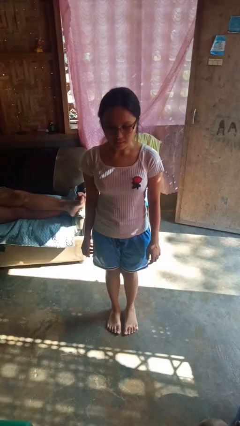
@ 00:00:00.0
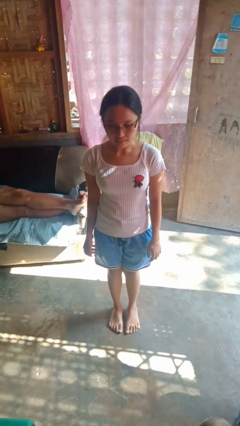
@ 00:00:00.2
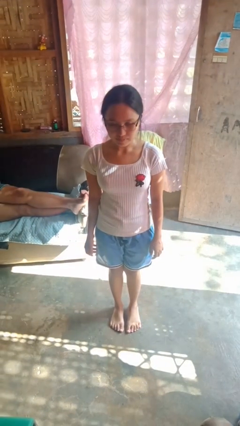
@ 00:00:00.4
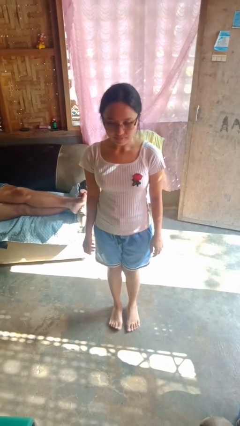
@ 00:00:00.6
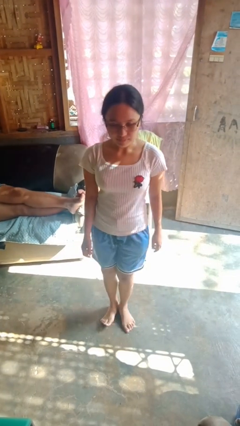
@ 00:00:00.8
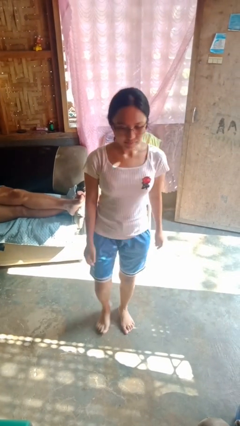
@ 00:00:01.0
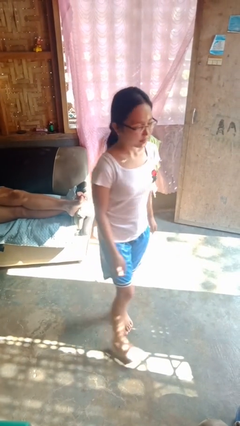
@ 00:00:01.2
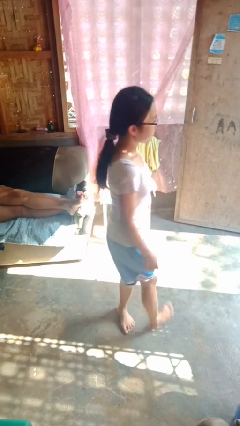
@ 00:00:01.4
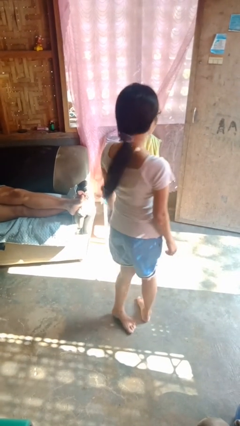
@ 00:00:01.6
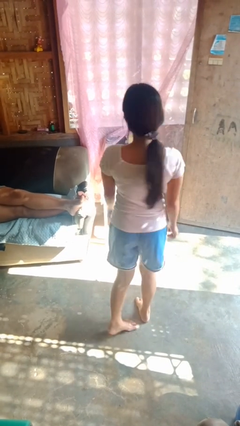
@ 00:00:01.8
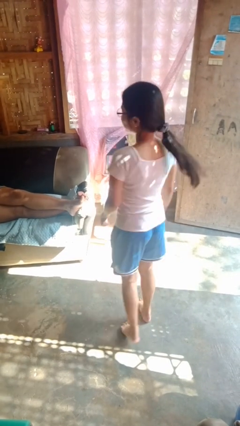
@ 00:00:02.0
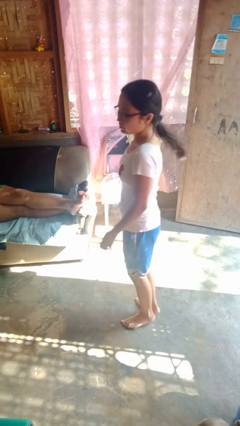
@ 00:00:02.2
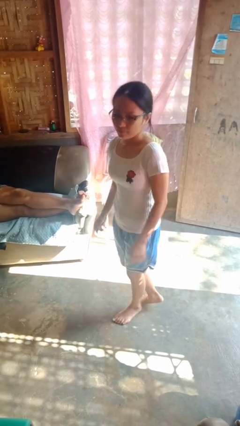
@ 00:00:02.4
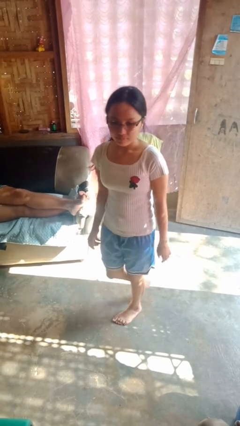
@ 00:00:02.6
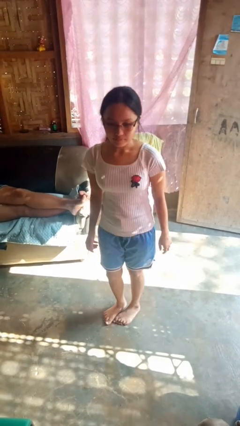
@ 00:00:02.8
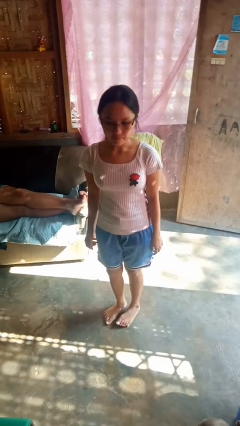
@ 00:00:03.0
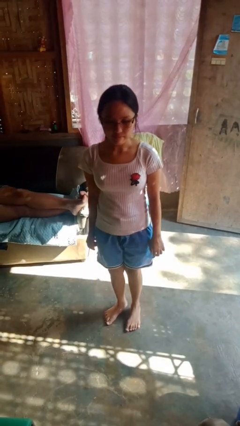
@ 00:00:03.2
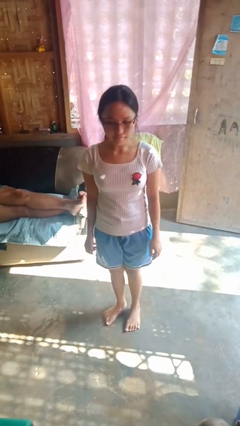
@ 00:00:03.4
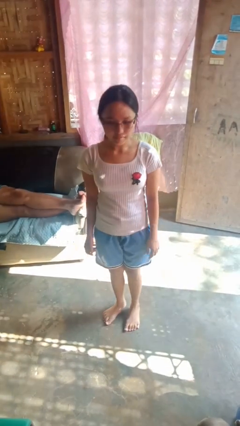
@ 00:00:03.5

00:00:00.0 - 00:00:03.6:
person twirls

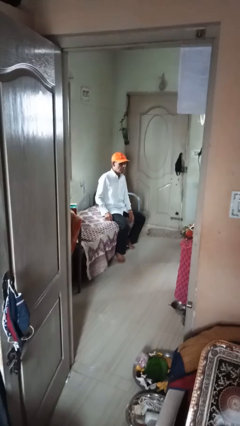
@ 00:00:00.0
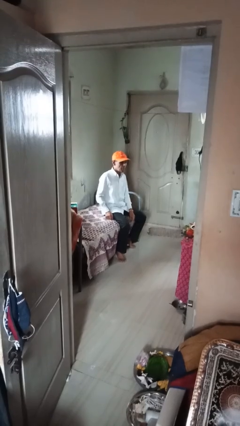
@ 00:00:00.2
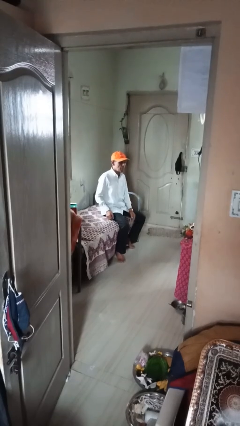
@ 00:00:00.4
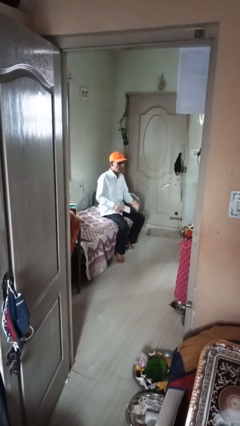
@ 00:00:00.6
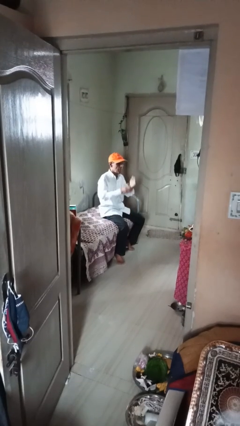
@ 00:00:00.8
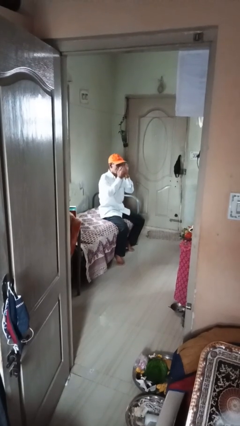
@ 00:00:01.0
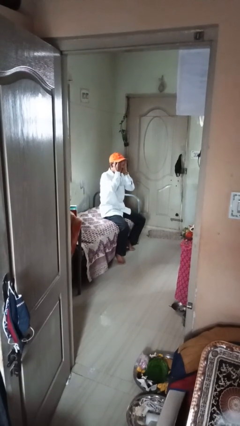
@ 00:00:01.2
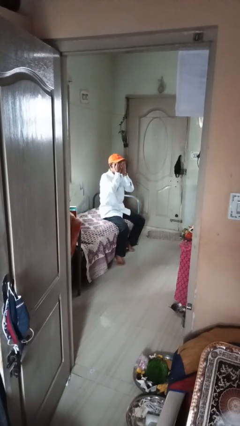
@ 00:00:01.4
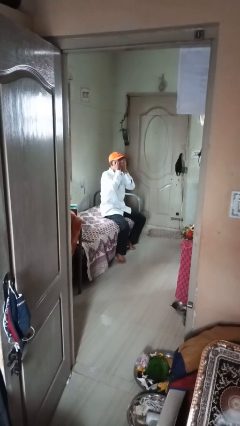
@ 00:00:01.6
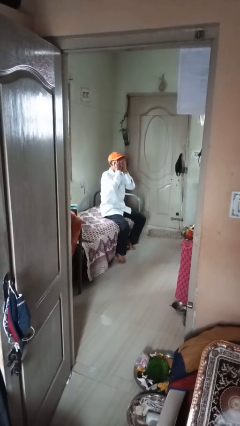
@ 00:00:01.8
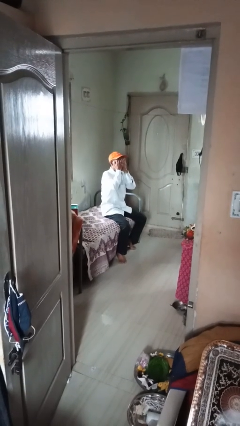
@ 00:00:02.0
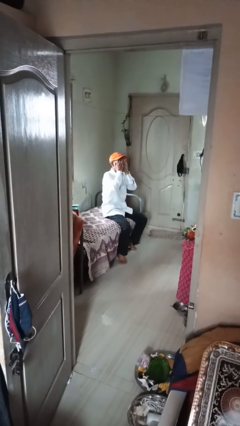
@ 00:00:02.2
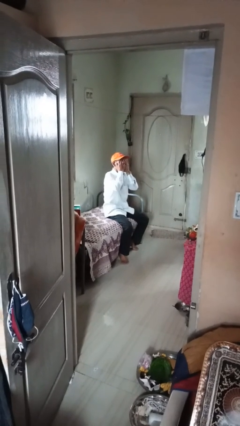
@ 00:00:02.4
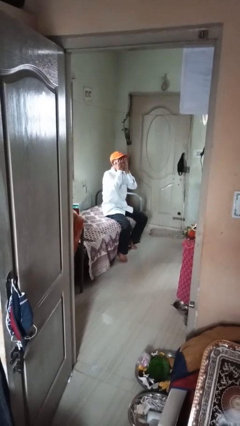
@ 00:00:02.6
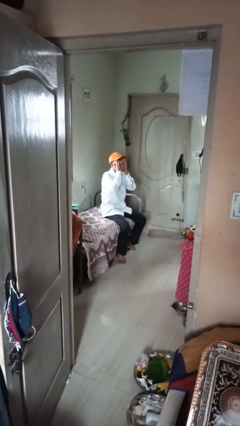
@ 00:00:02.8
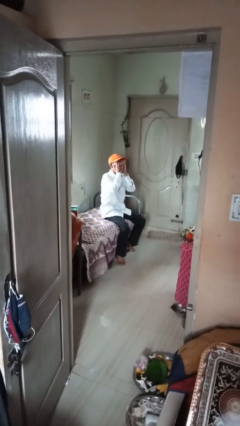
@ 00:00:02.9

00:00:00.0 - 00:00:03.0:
person covers face with hands

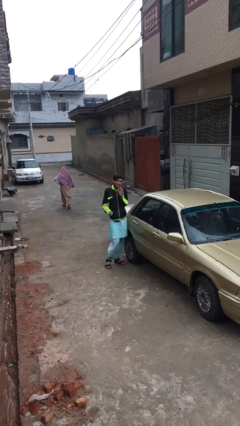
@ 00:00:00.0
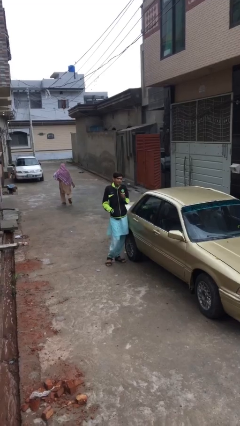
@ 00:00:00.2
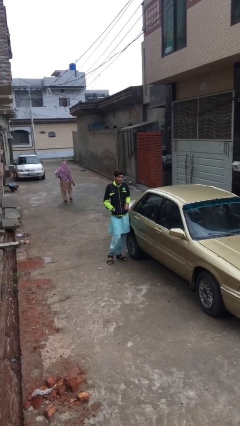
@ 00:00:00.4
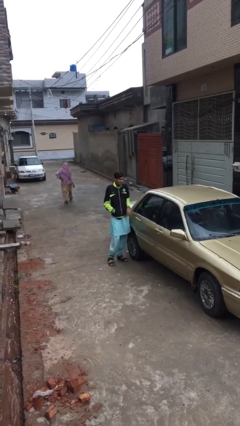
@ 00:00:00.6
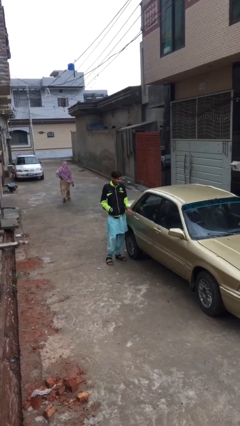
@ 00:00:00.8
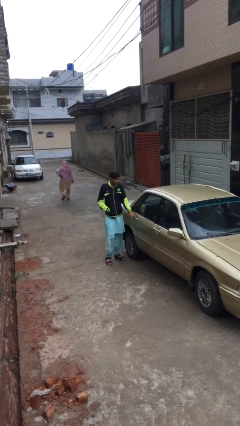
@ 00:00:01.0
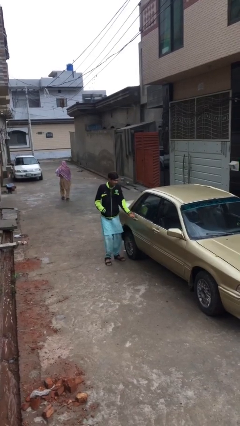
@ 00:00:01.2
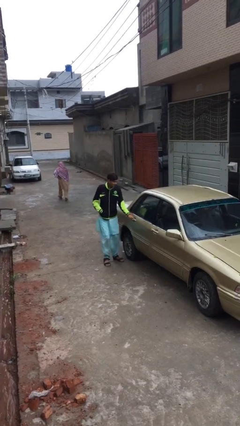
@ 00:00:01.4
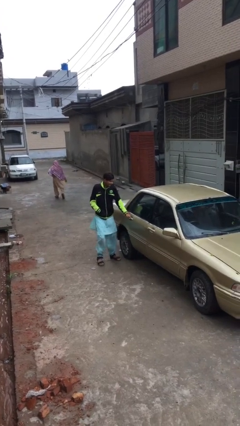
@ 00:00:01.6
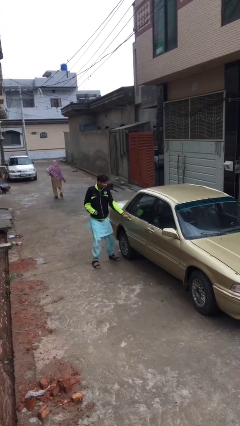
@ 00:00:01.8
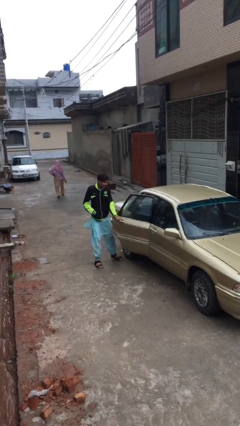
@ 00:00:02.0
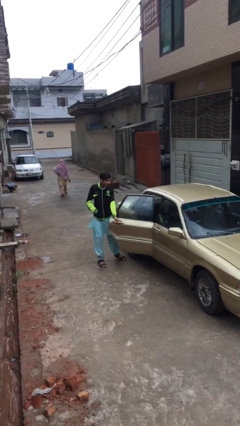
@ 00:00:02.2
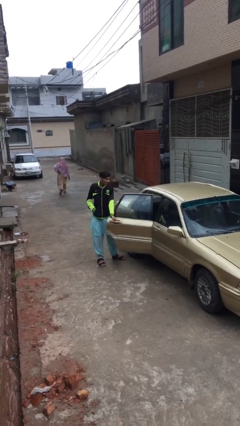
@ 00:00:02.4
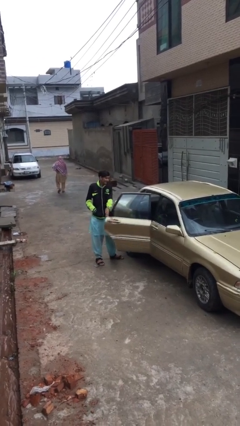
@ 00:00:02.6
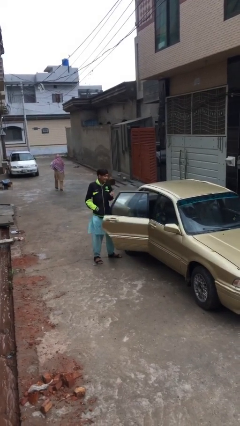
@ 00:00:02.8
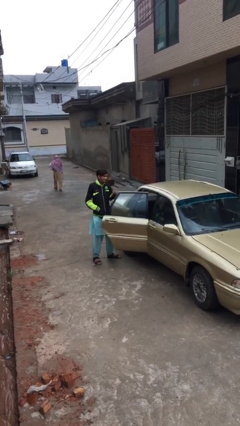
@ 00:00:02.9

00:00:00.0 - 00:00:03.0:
person opens car door

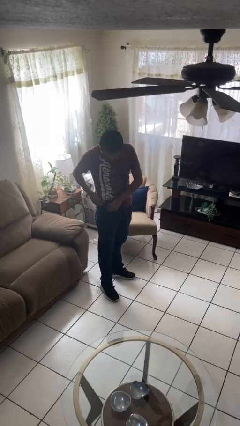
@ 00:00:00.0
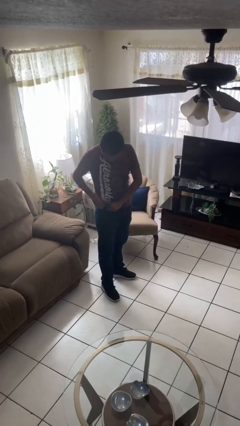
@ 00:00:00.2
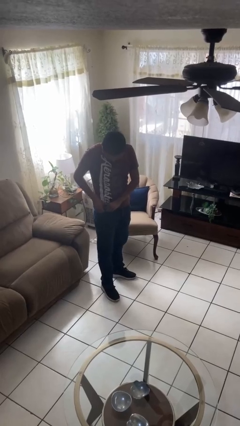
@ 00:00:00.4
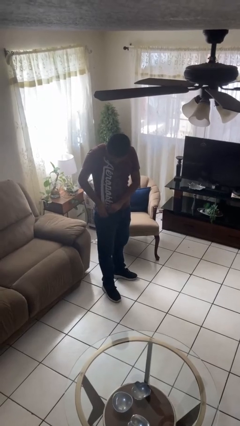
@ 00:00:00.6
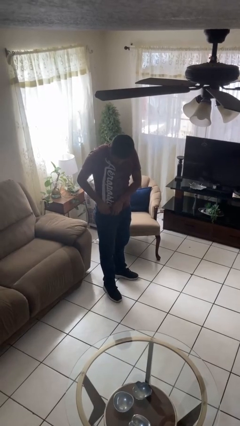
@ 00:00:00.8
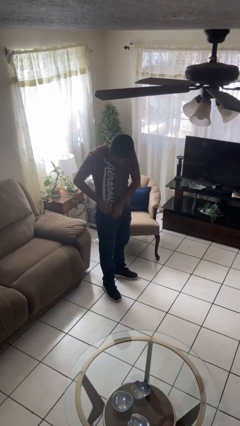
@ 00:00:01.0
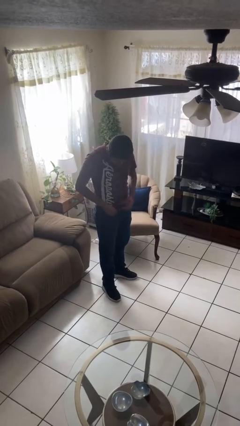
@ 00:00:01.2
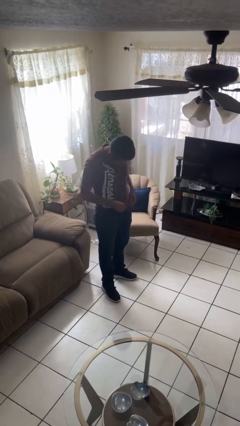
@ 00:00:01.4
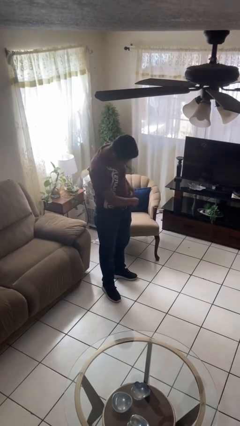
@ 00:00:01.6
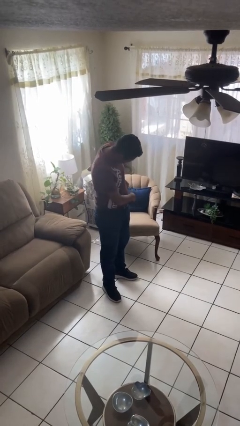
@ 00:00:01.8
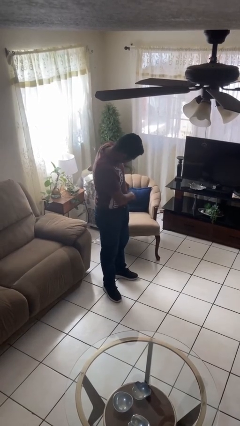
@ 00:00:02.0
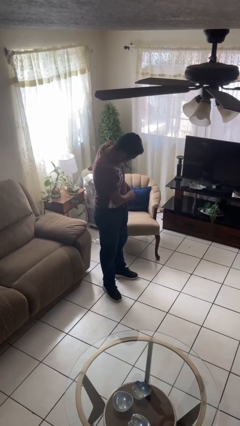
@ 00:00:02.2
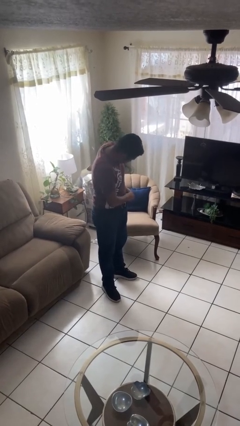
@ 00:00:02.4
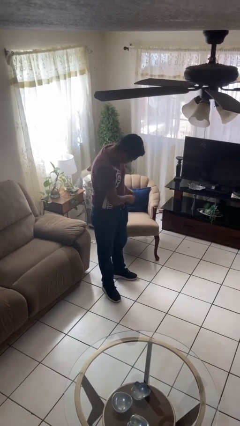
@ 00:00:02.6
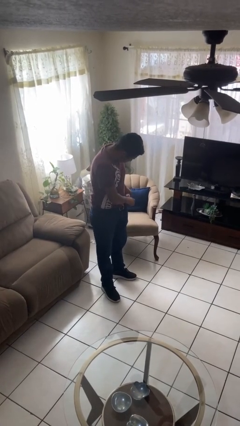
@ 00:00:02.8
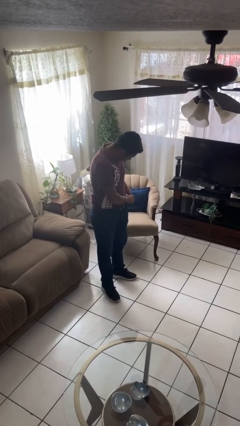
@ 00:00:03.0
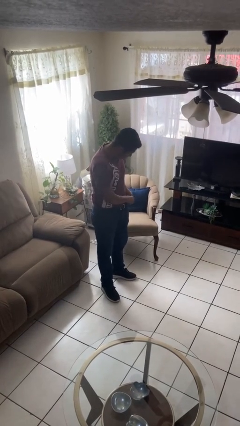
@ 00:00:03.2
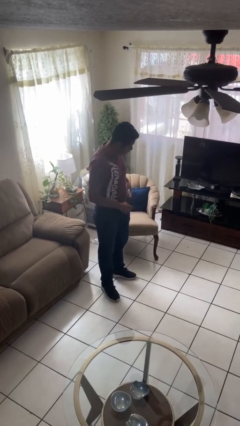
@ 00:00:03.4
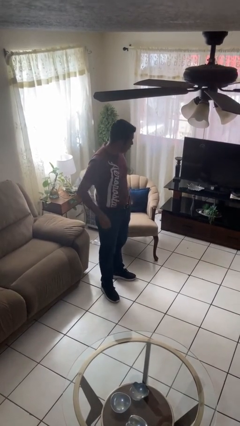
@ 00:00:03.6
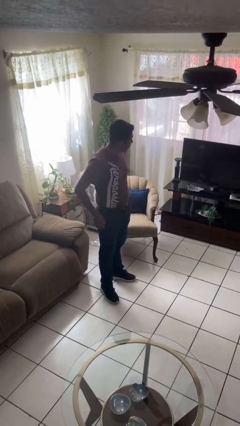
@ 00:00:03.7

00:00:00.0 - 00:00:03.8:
person tucks in shirt

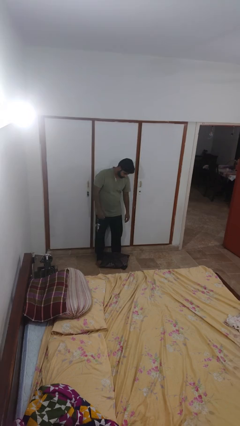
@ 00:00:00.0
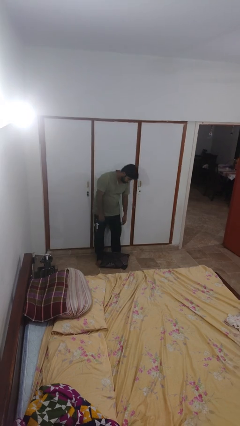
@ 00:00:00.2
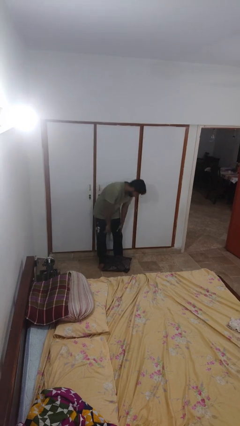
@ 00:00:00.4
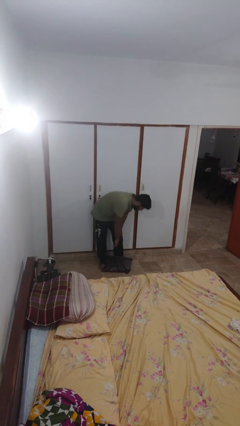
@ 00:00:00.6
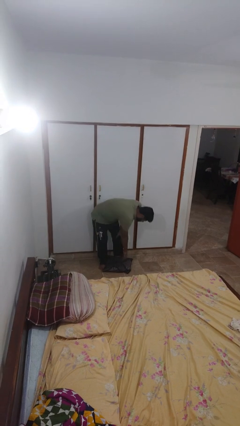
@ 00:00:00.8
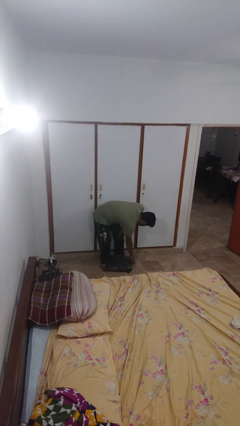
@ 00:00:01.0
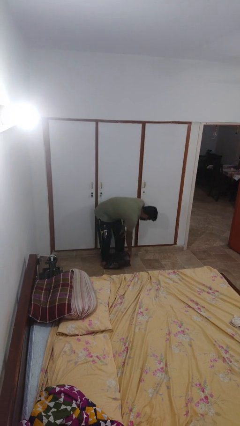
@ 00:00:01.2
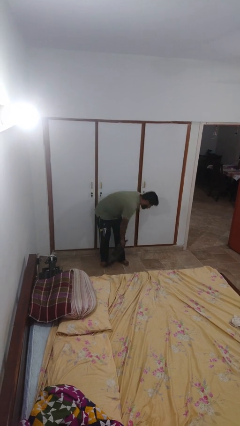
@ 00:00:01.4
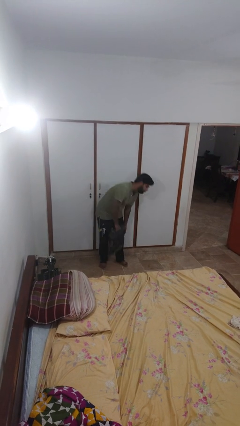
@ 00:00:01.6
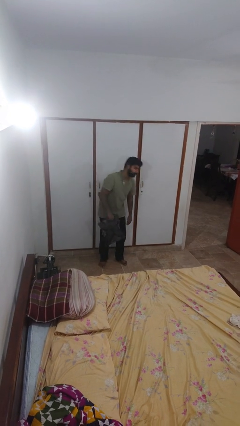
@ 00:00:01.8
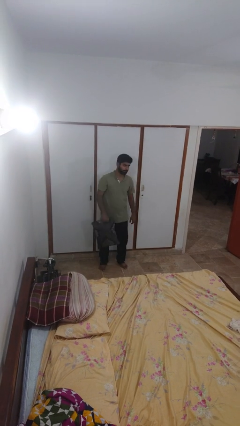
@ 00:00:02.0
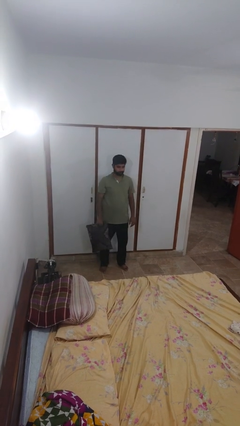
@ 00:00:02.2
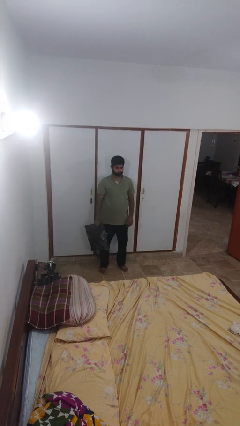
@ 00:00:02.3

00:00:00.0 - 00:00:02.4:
person picks up object from floor

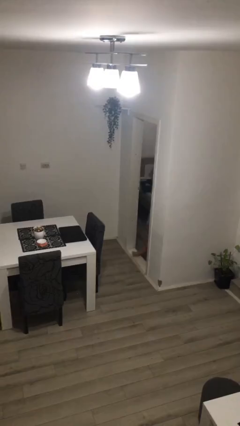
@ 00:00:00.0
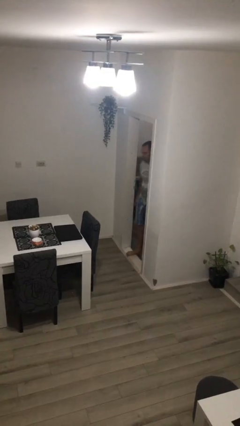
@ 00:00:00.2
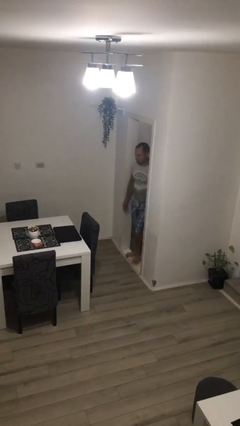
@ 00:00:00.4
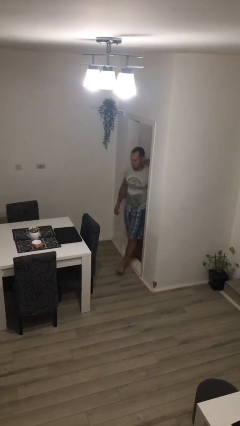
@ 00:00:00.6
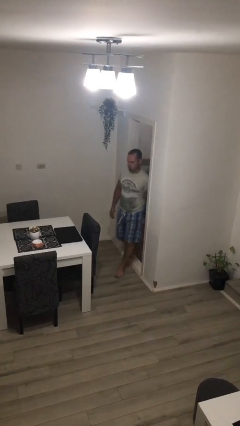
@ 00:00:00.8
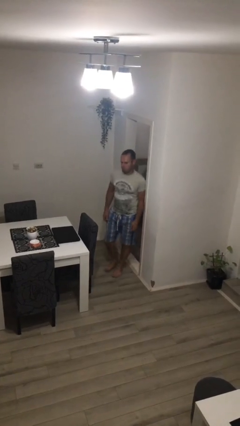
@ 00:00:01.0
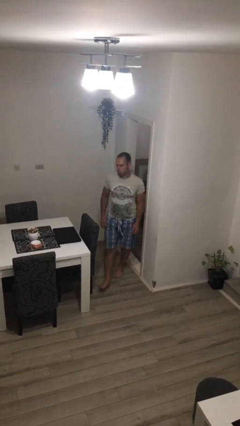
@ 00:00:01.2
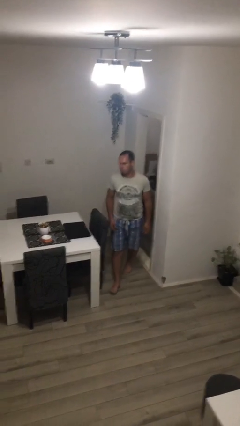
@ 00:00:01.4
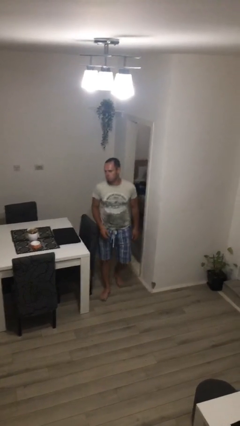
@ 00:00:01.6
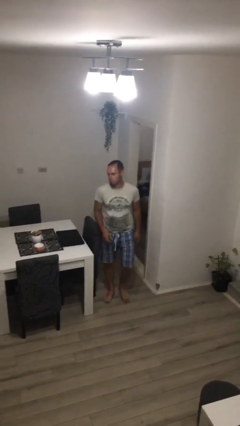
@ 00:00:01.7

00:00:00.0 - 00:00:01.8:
person enters scene through structure
